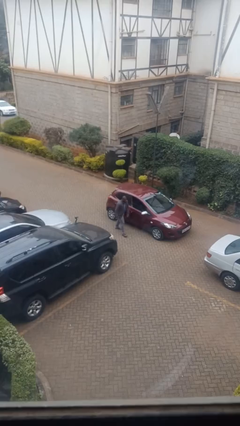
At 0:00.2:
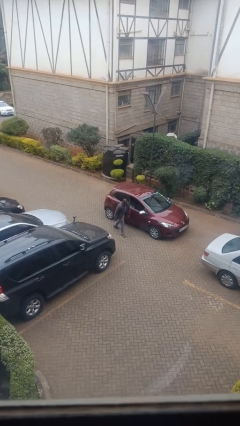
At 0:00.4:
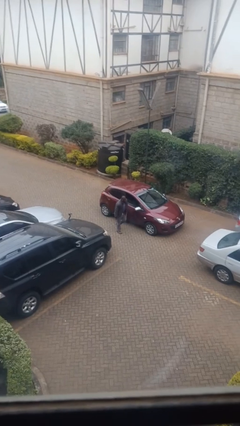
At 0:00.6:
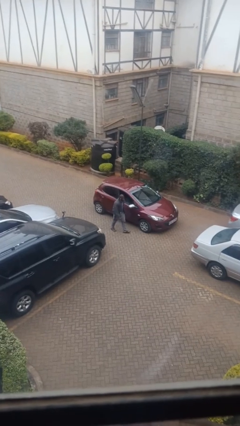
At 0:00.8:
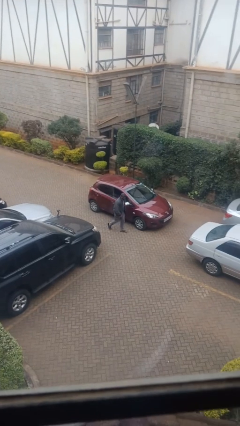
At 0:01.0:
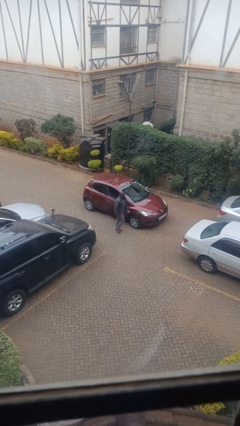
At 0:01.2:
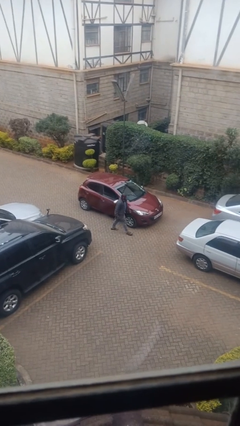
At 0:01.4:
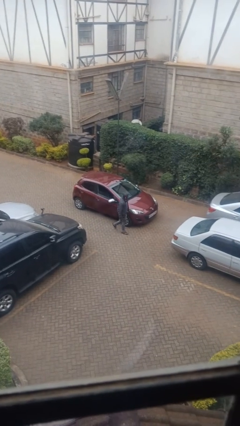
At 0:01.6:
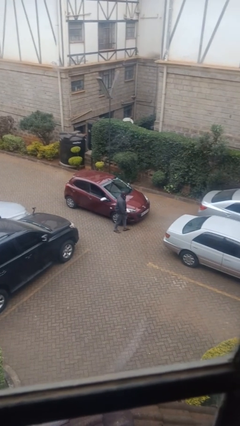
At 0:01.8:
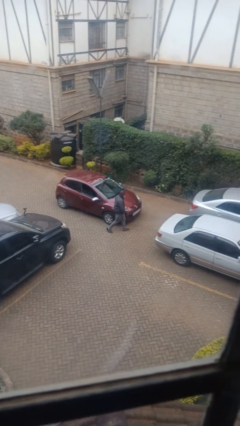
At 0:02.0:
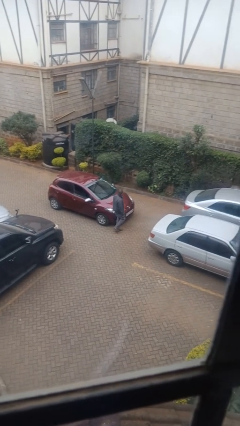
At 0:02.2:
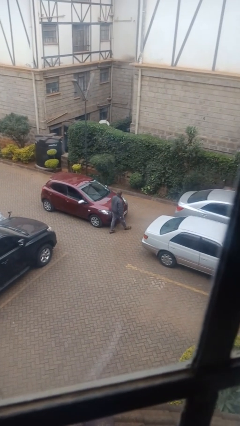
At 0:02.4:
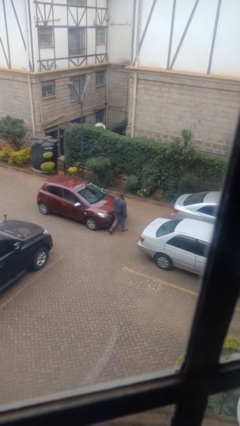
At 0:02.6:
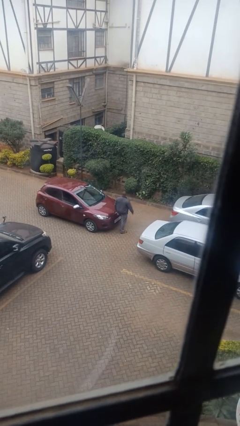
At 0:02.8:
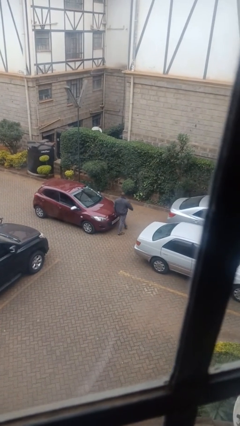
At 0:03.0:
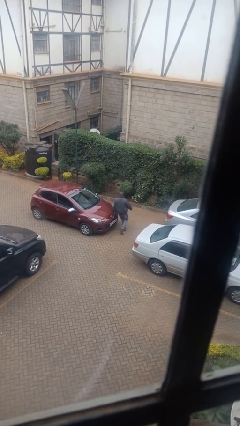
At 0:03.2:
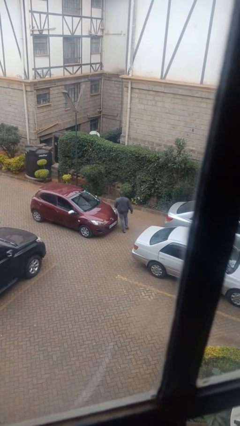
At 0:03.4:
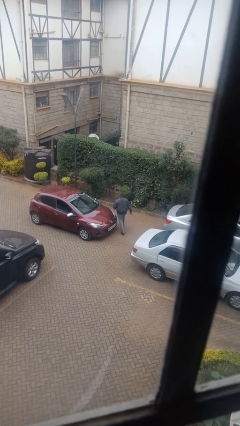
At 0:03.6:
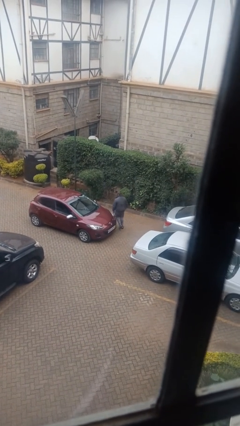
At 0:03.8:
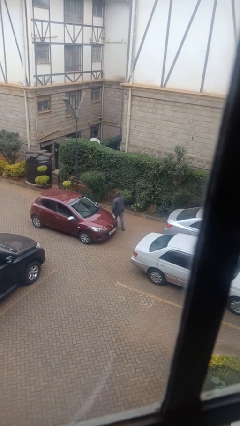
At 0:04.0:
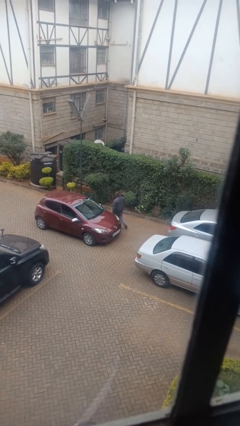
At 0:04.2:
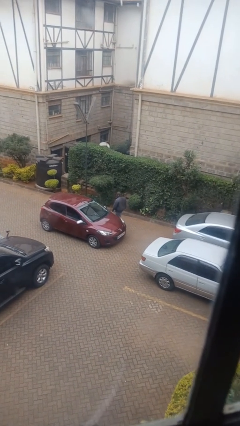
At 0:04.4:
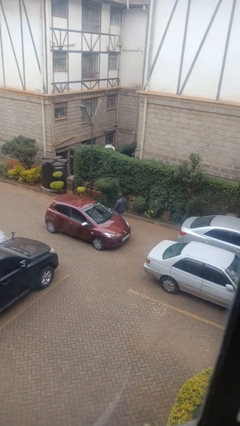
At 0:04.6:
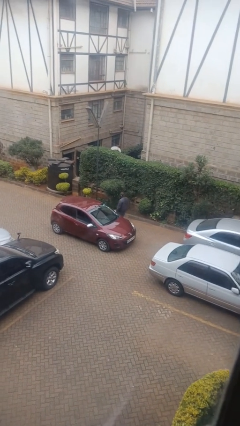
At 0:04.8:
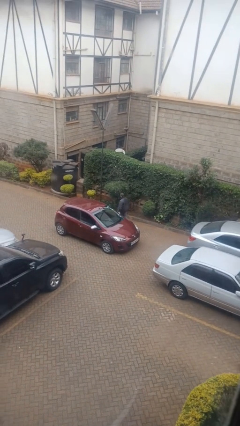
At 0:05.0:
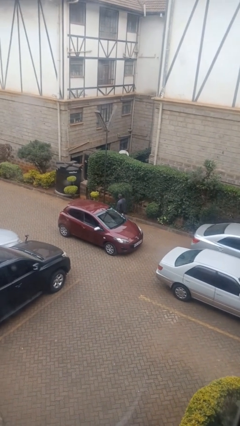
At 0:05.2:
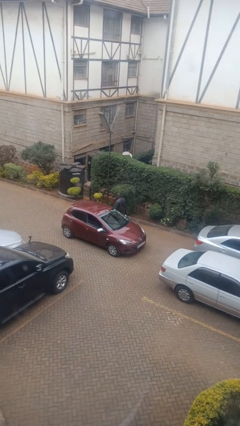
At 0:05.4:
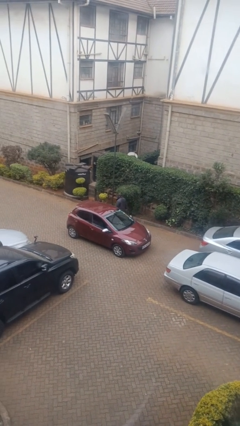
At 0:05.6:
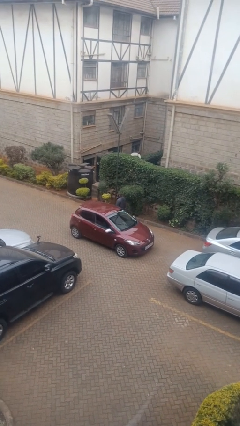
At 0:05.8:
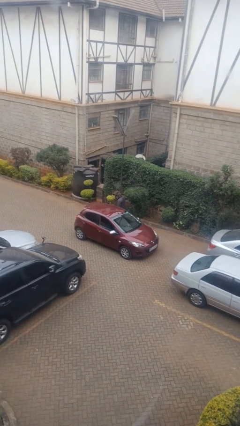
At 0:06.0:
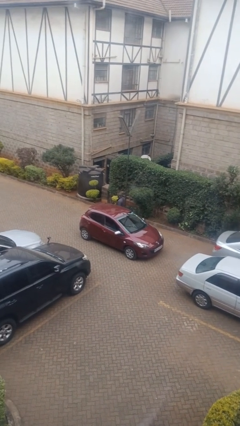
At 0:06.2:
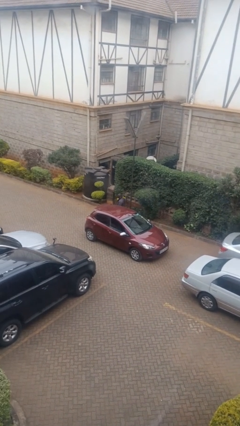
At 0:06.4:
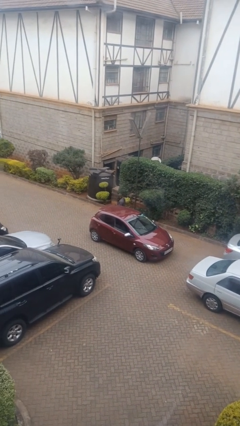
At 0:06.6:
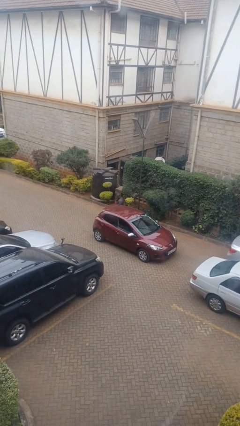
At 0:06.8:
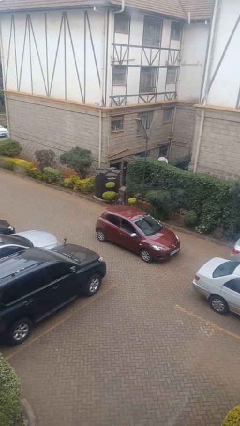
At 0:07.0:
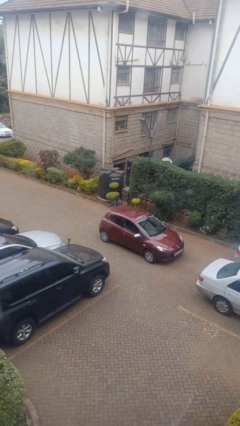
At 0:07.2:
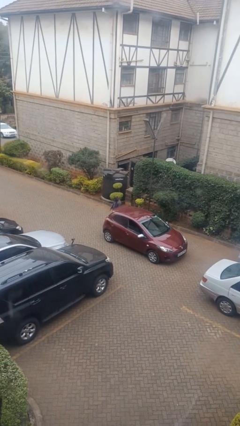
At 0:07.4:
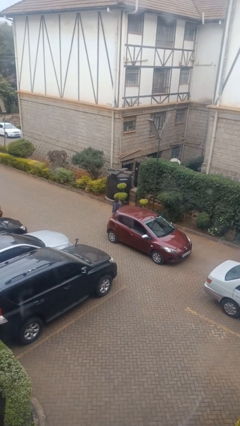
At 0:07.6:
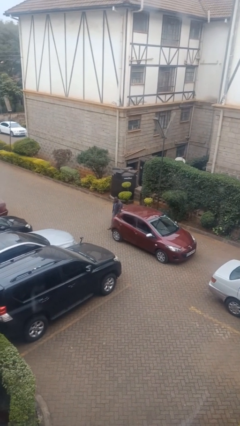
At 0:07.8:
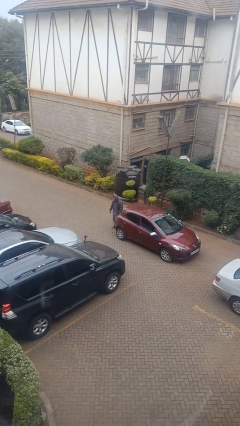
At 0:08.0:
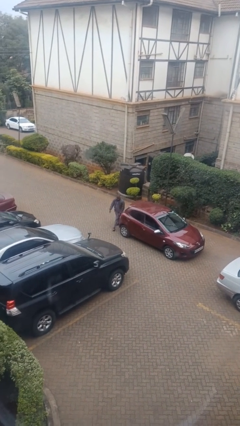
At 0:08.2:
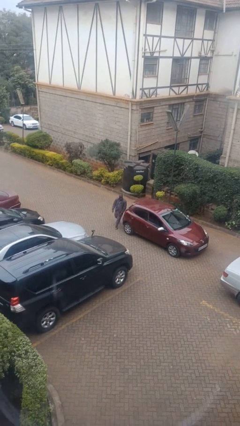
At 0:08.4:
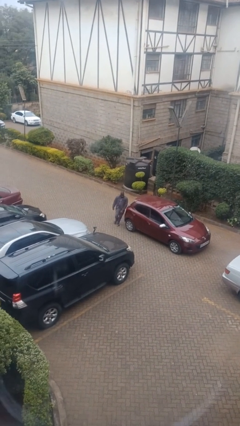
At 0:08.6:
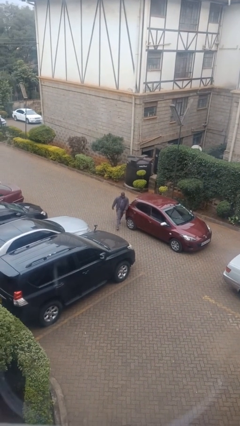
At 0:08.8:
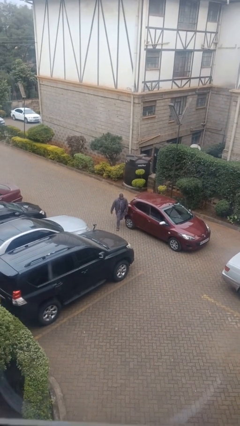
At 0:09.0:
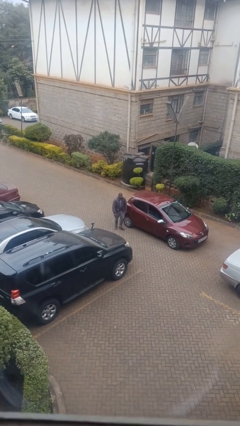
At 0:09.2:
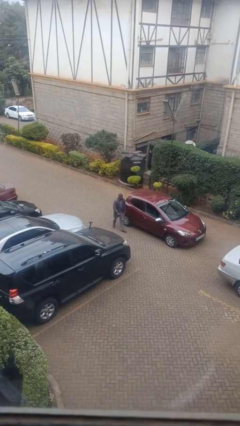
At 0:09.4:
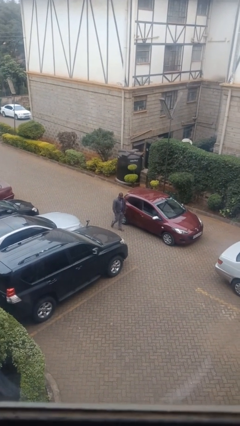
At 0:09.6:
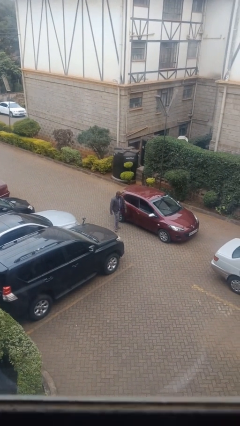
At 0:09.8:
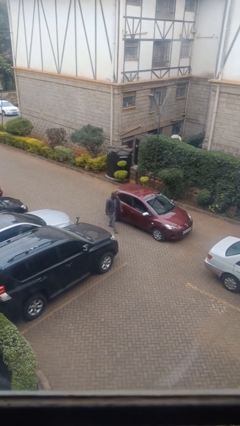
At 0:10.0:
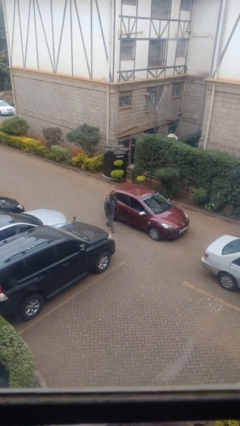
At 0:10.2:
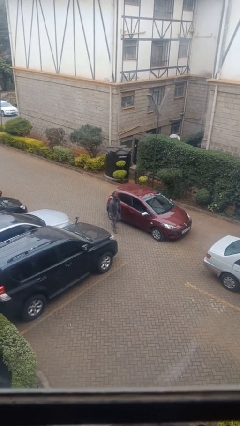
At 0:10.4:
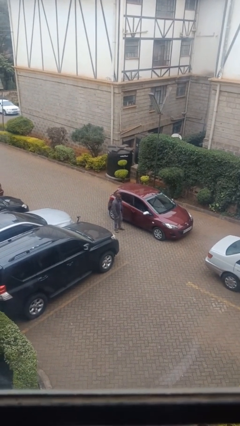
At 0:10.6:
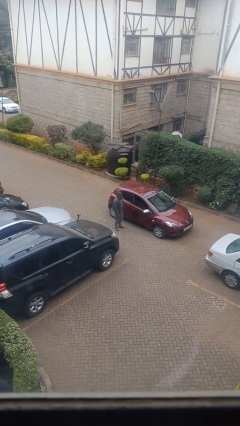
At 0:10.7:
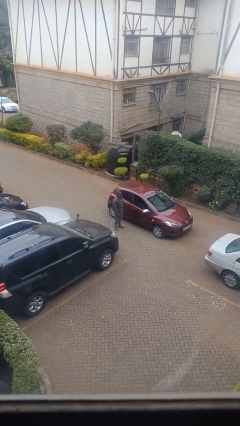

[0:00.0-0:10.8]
person walks around car

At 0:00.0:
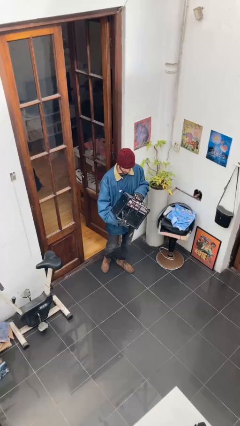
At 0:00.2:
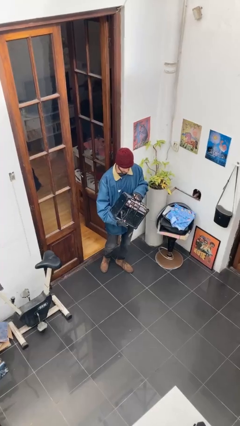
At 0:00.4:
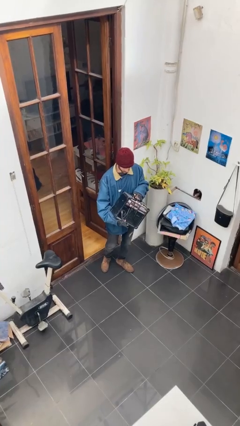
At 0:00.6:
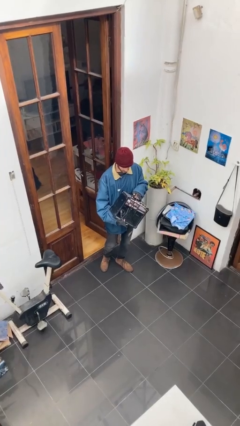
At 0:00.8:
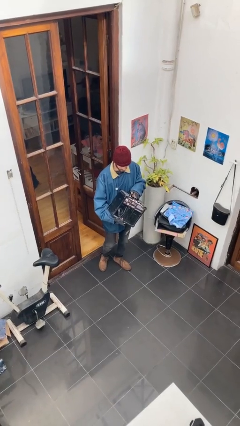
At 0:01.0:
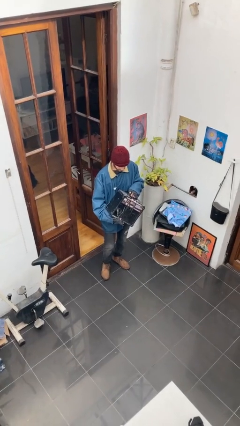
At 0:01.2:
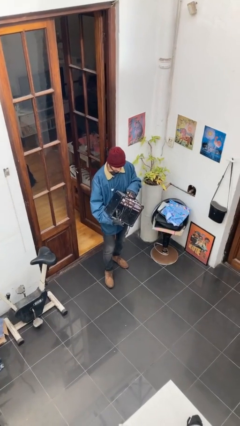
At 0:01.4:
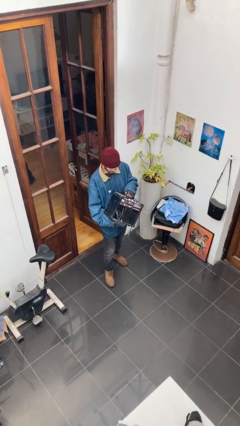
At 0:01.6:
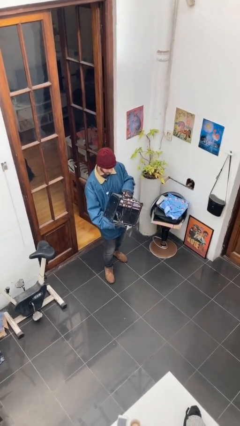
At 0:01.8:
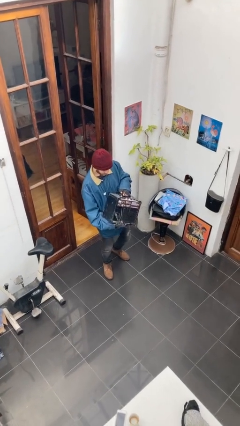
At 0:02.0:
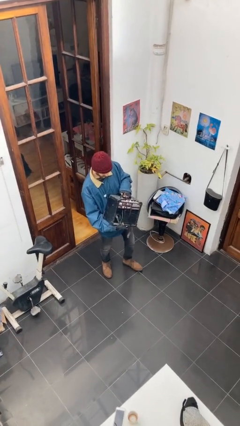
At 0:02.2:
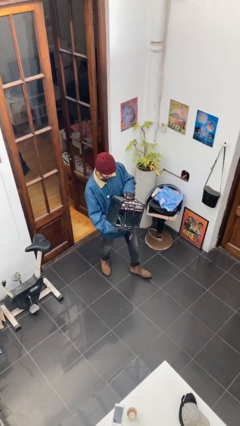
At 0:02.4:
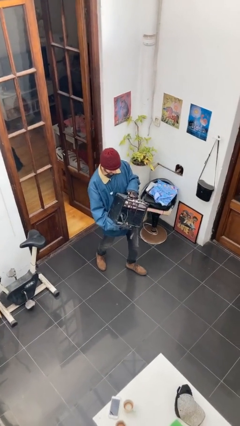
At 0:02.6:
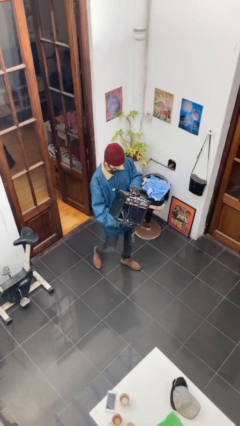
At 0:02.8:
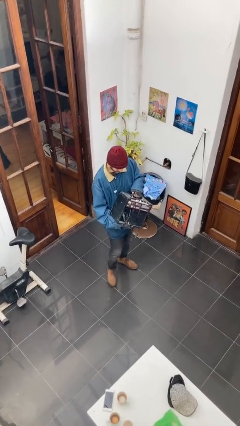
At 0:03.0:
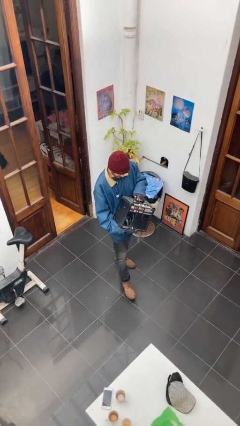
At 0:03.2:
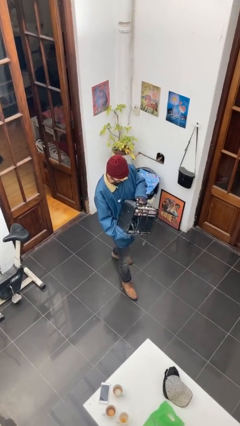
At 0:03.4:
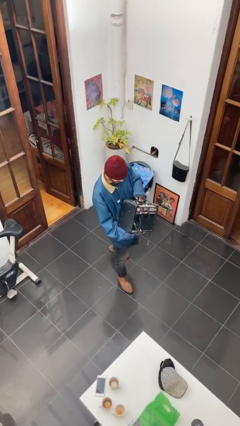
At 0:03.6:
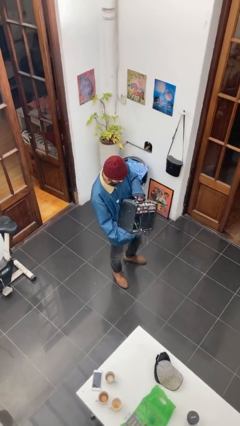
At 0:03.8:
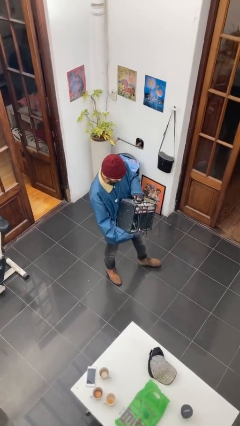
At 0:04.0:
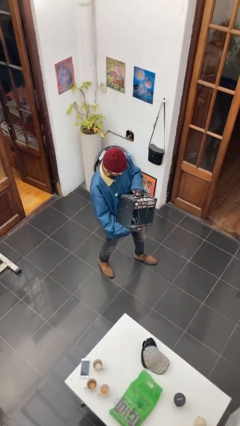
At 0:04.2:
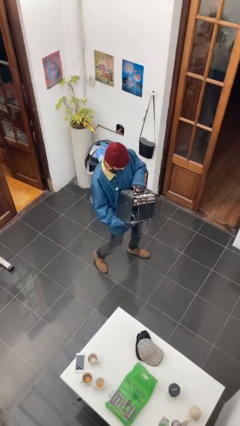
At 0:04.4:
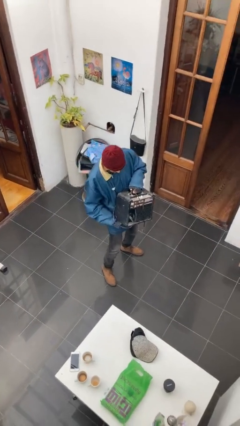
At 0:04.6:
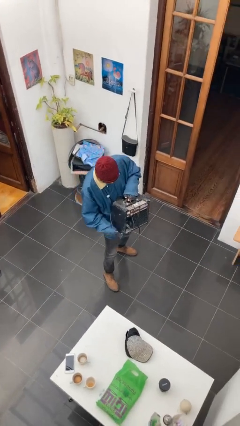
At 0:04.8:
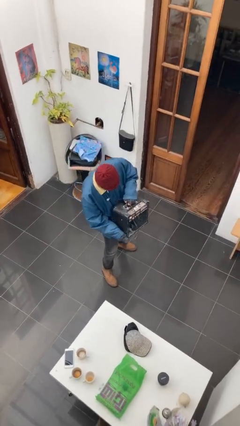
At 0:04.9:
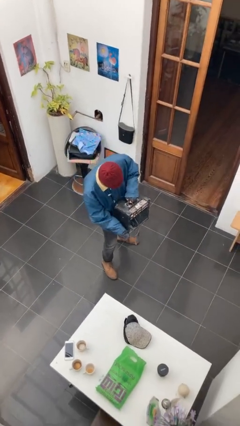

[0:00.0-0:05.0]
person carries heavy object

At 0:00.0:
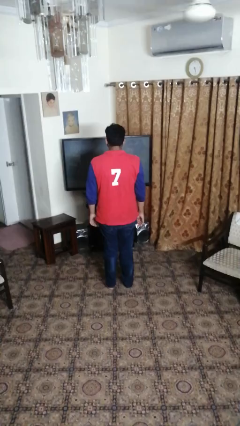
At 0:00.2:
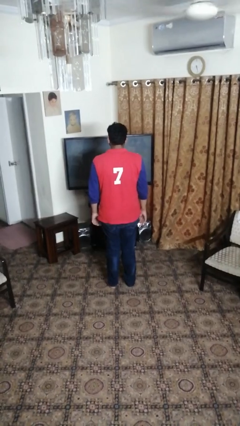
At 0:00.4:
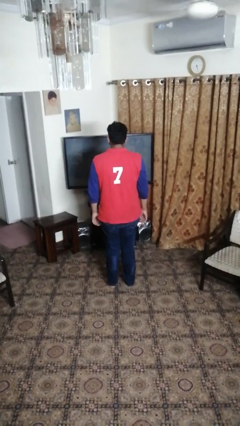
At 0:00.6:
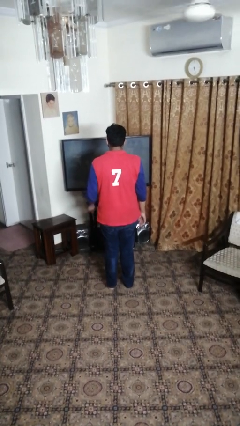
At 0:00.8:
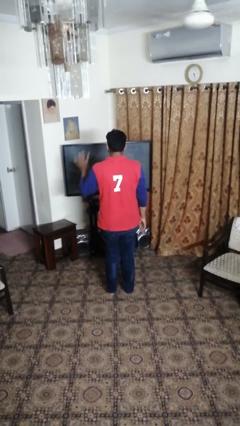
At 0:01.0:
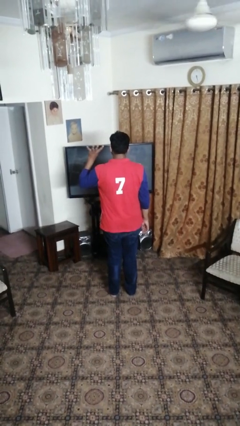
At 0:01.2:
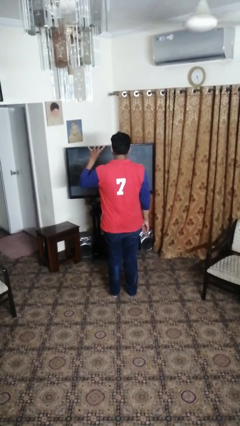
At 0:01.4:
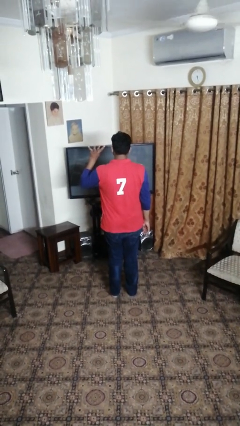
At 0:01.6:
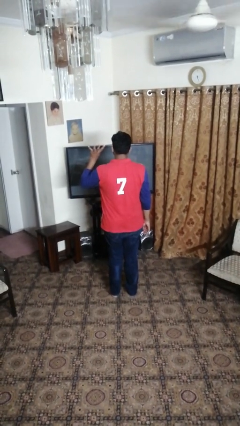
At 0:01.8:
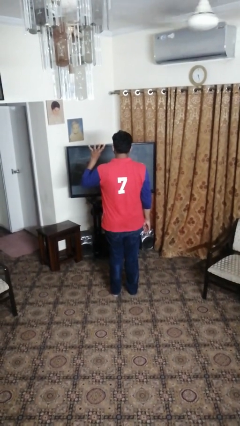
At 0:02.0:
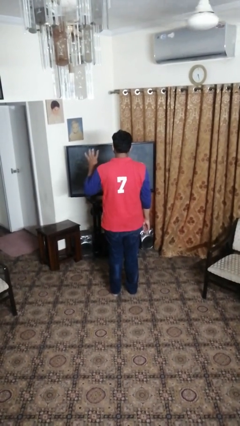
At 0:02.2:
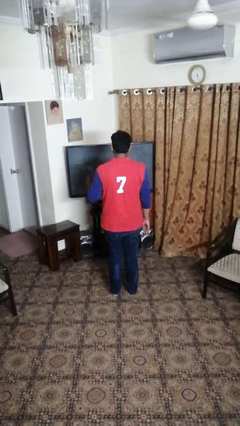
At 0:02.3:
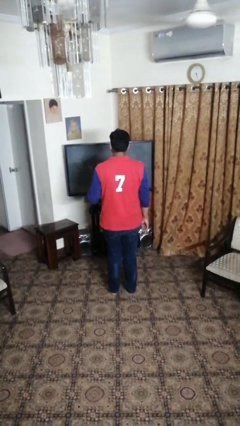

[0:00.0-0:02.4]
person gestures number four
